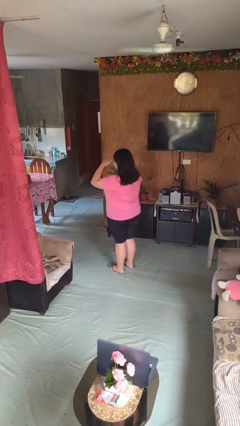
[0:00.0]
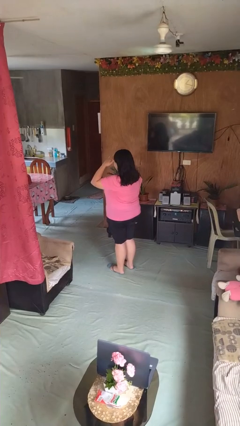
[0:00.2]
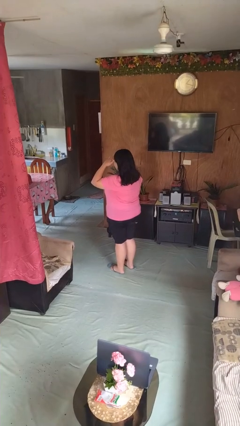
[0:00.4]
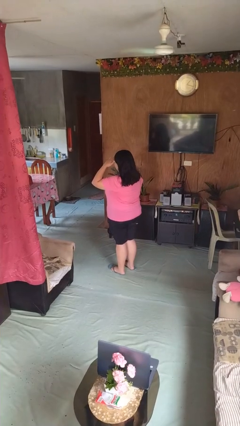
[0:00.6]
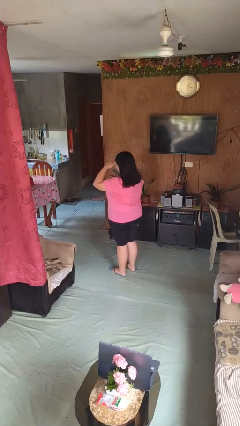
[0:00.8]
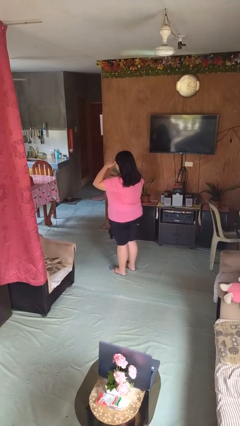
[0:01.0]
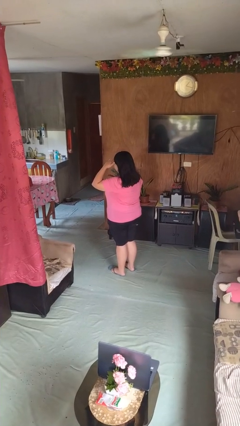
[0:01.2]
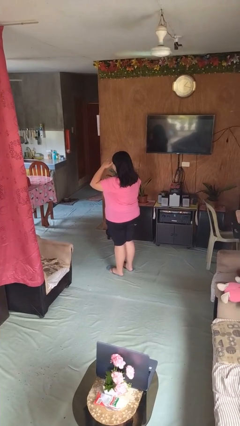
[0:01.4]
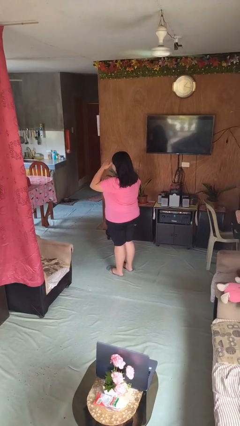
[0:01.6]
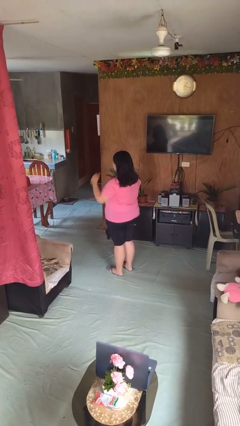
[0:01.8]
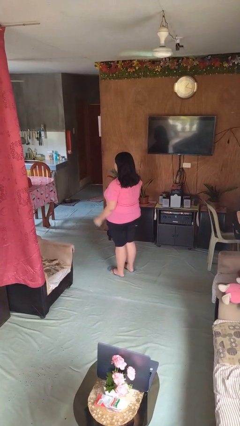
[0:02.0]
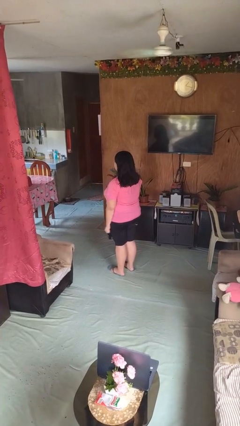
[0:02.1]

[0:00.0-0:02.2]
person salutes

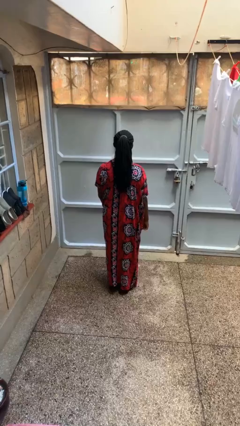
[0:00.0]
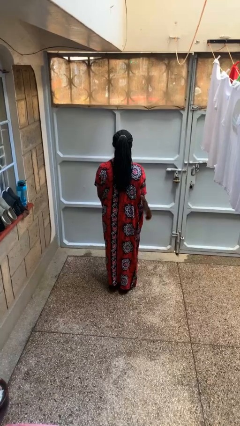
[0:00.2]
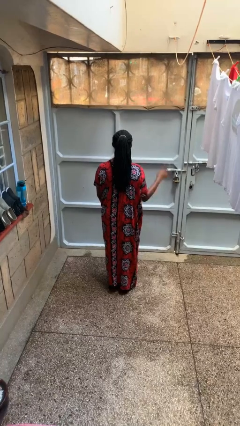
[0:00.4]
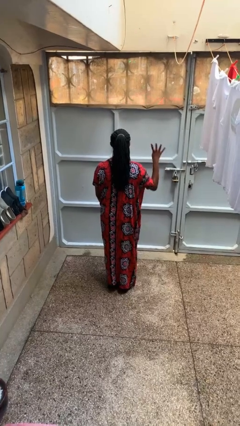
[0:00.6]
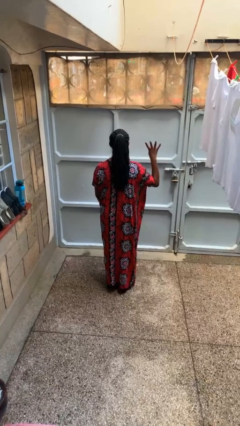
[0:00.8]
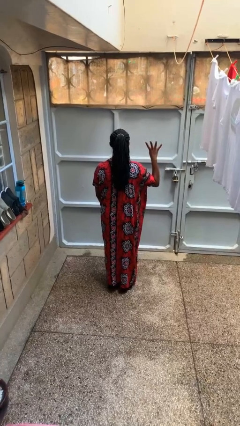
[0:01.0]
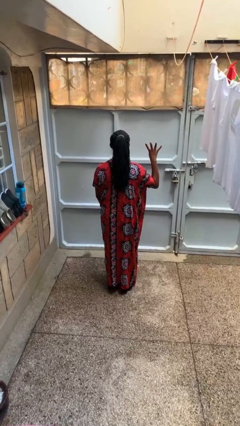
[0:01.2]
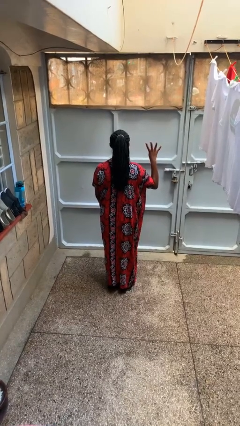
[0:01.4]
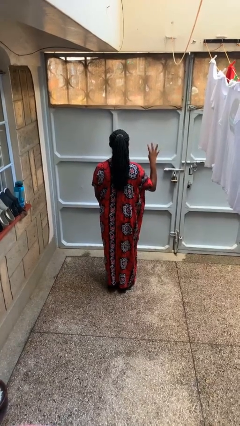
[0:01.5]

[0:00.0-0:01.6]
person gestures number four

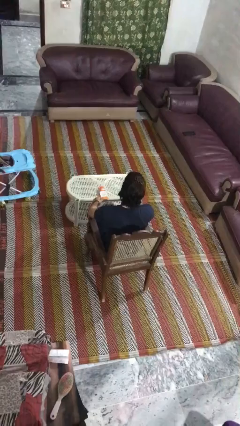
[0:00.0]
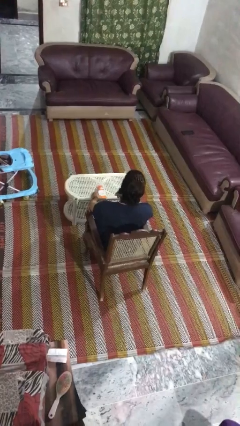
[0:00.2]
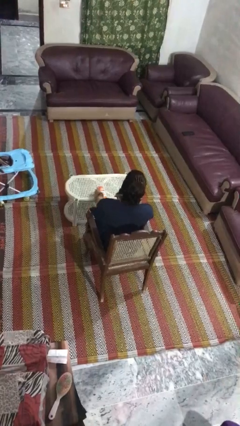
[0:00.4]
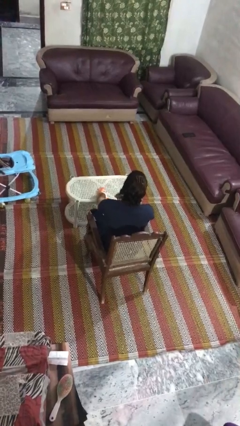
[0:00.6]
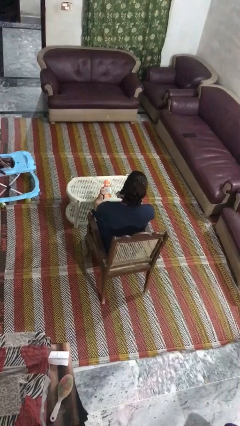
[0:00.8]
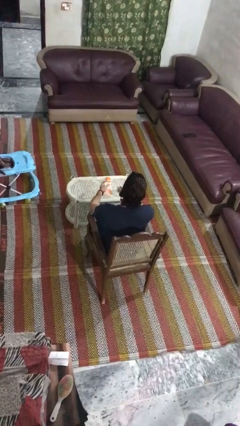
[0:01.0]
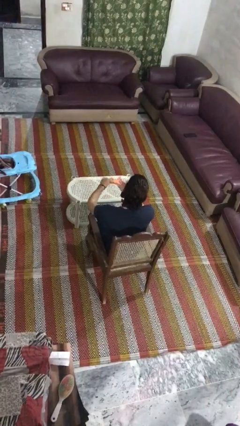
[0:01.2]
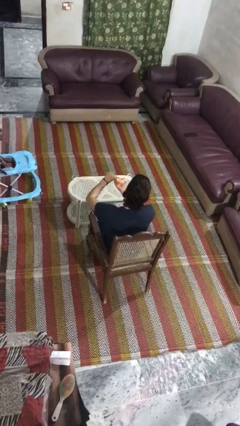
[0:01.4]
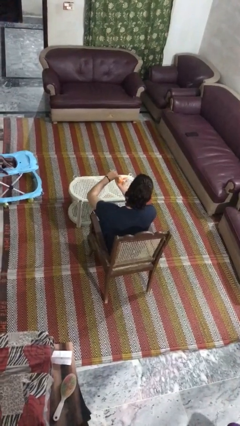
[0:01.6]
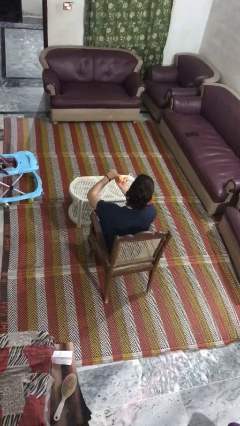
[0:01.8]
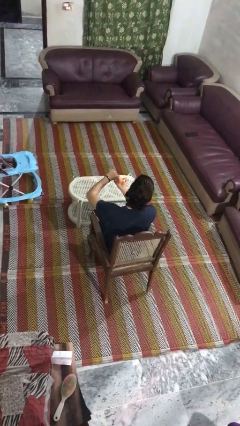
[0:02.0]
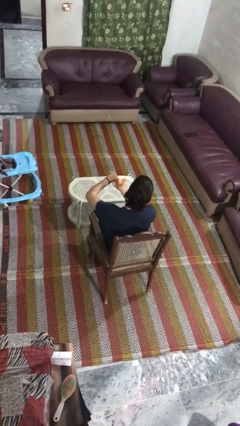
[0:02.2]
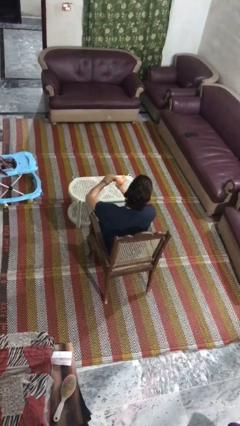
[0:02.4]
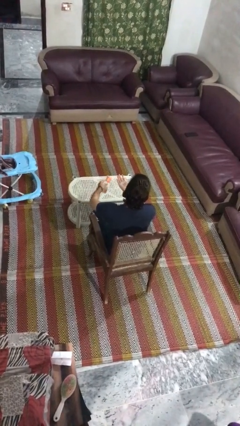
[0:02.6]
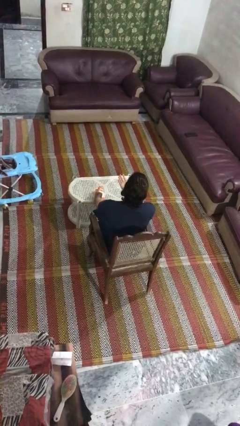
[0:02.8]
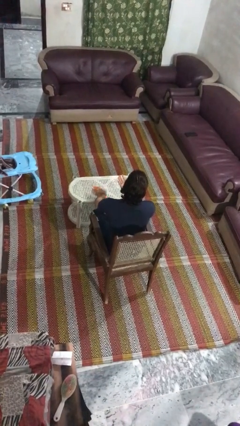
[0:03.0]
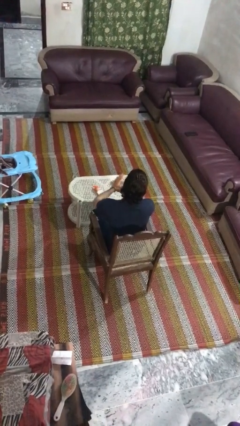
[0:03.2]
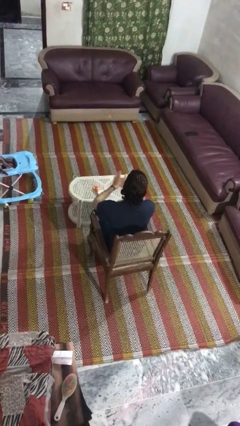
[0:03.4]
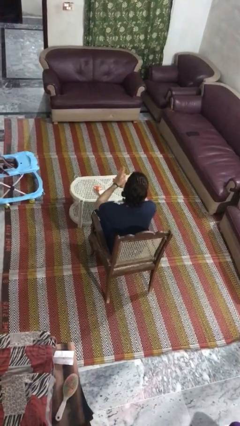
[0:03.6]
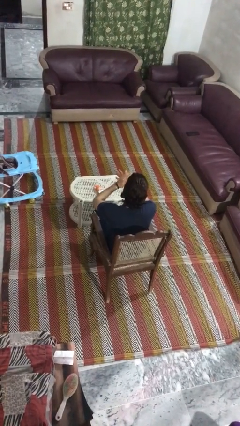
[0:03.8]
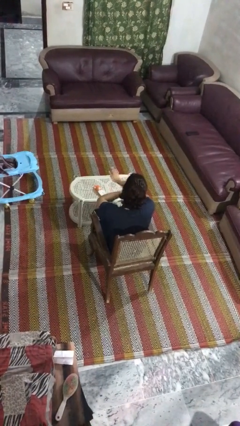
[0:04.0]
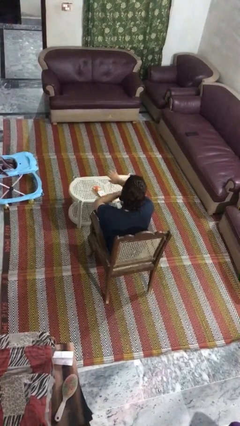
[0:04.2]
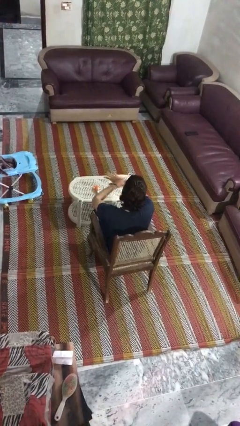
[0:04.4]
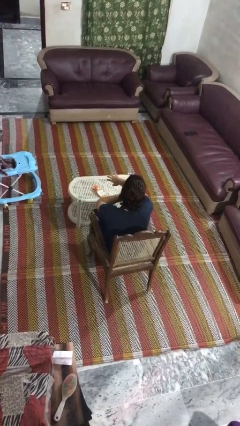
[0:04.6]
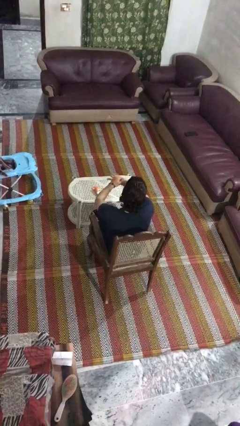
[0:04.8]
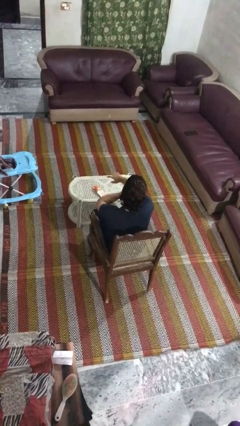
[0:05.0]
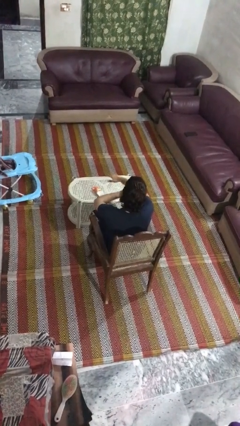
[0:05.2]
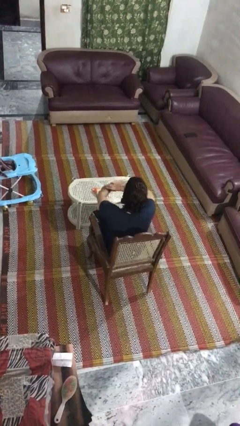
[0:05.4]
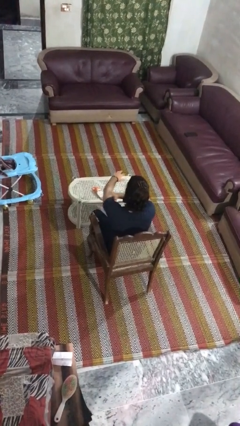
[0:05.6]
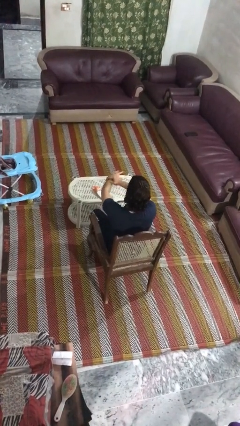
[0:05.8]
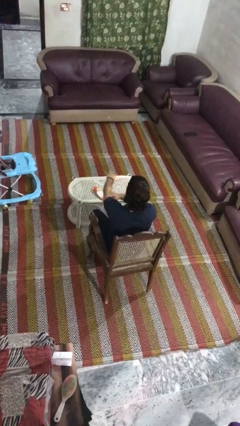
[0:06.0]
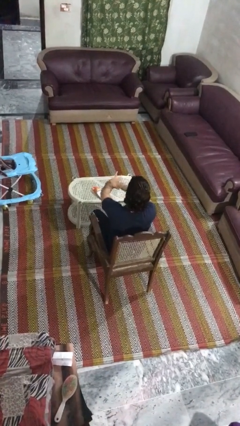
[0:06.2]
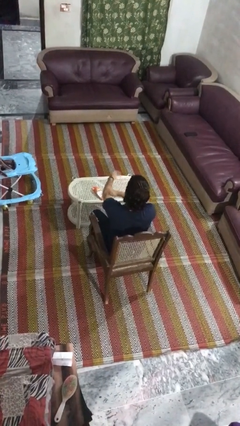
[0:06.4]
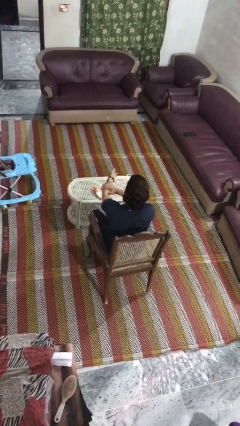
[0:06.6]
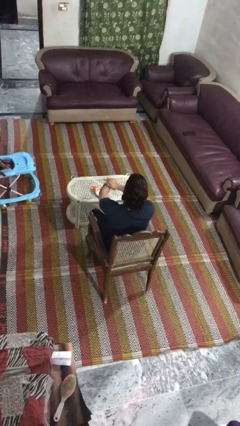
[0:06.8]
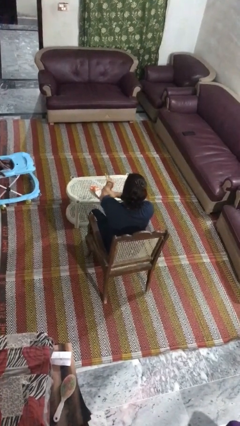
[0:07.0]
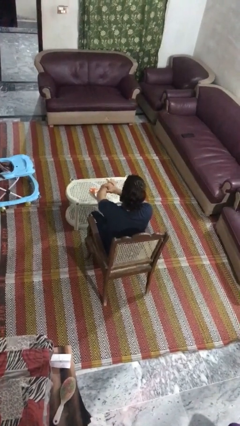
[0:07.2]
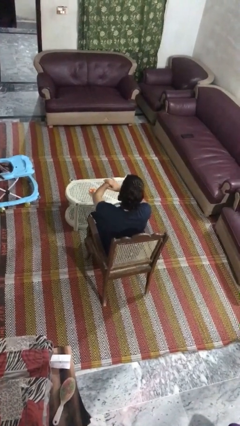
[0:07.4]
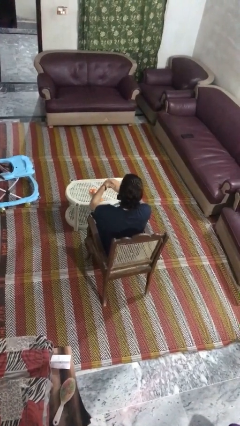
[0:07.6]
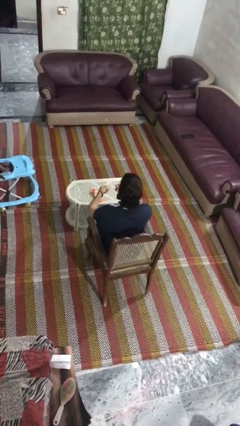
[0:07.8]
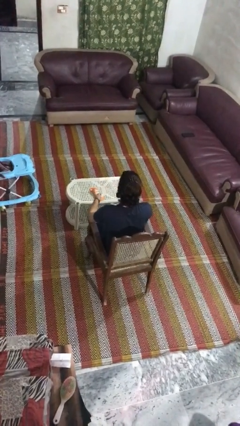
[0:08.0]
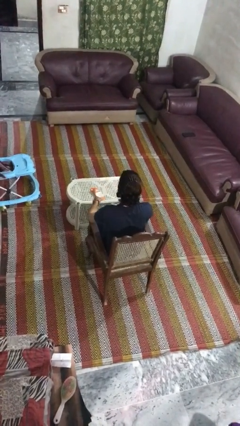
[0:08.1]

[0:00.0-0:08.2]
person applies sunscreen

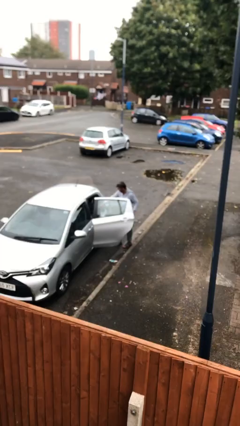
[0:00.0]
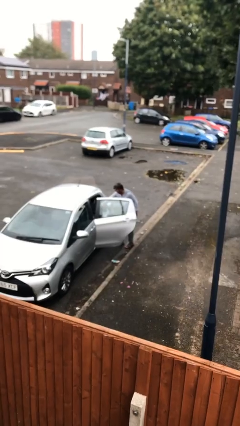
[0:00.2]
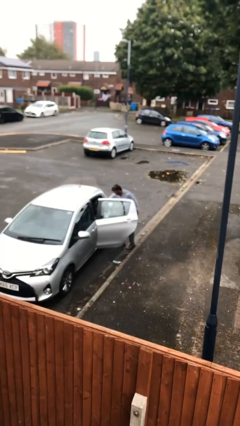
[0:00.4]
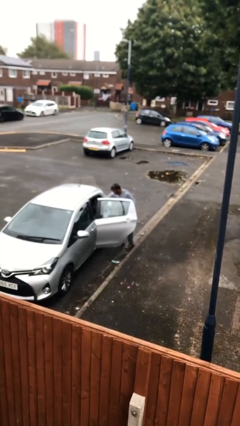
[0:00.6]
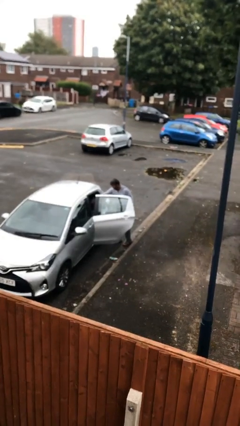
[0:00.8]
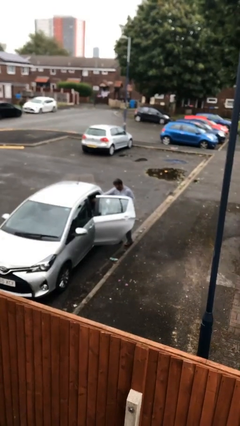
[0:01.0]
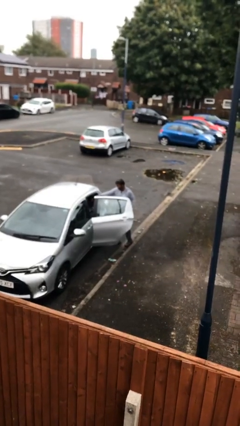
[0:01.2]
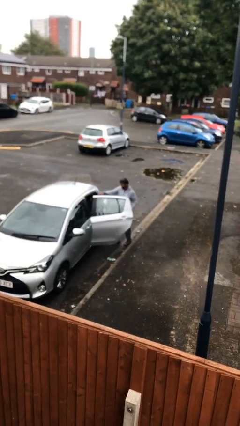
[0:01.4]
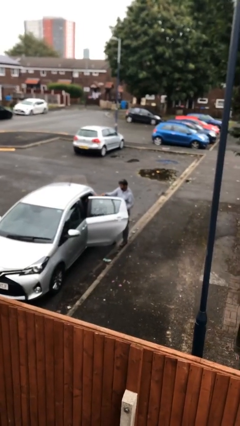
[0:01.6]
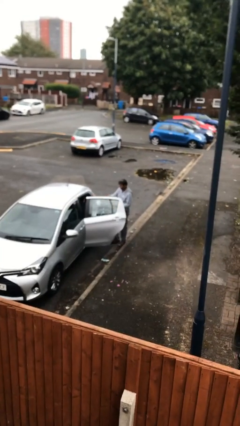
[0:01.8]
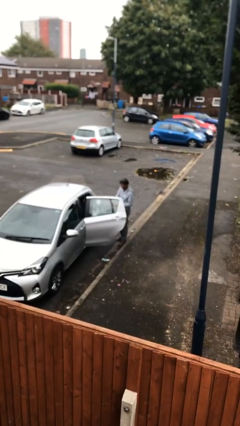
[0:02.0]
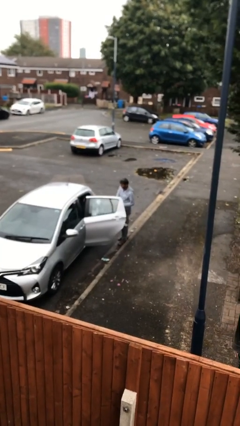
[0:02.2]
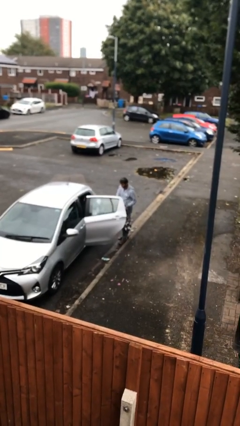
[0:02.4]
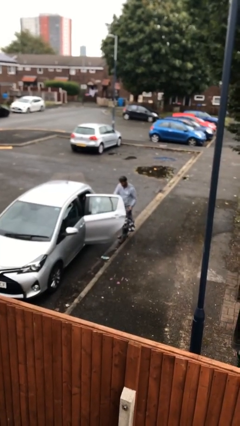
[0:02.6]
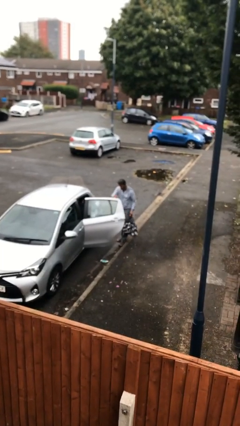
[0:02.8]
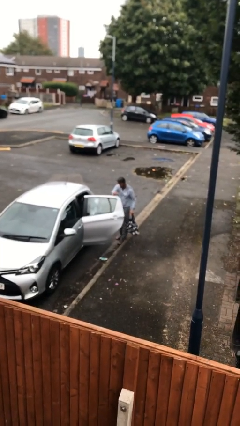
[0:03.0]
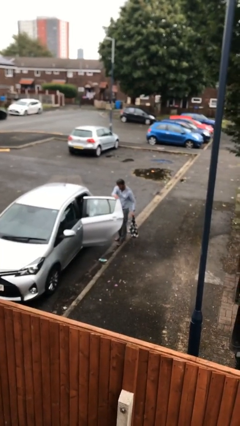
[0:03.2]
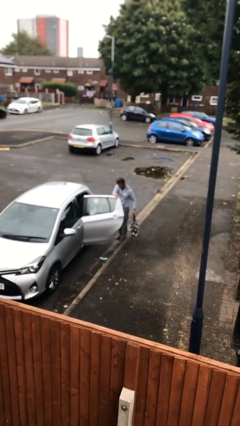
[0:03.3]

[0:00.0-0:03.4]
person unloads car

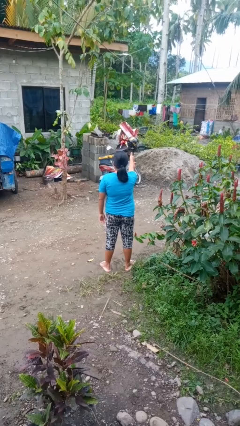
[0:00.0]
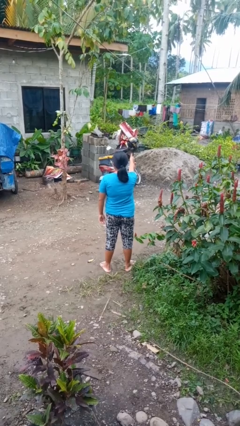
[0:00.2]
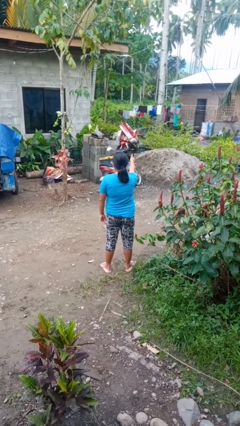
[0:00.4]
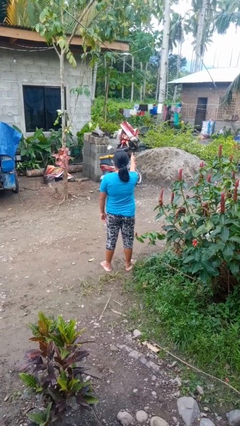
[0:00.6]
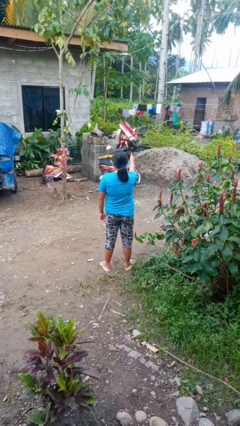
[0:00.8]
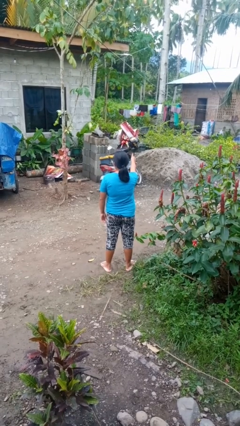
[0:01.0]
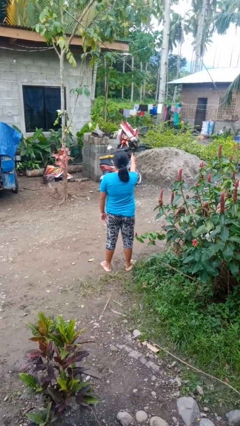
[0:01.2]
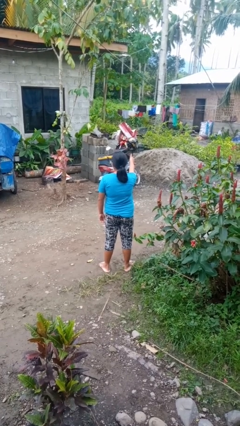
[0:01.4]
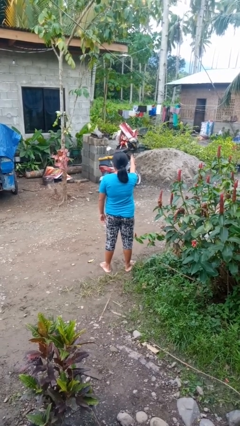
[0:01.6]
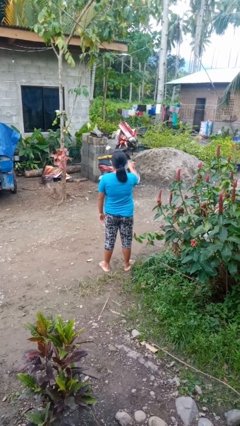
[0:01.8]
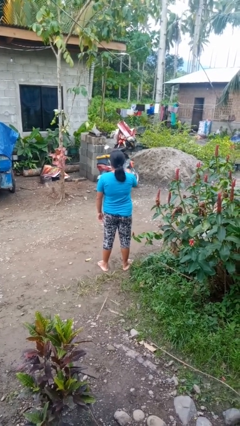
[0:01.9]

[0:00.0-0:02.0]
person gestures thumbs up
